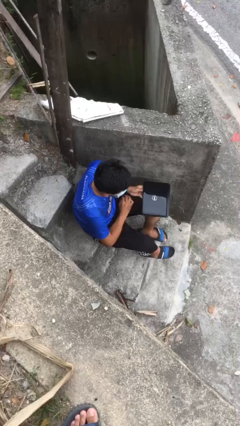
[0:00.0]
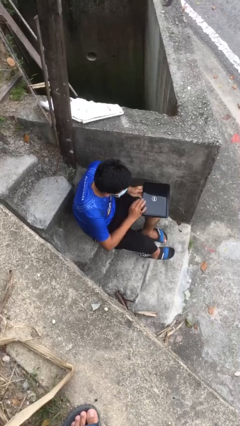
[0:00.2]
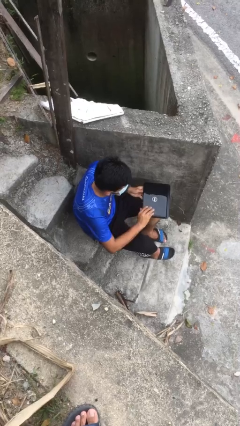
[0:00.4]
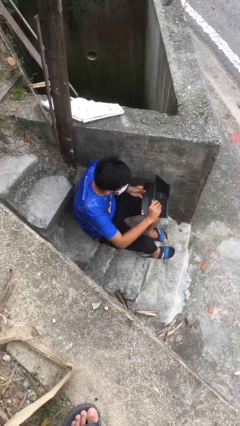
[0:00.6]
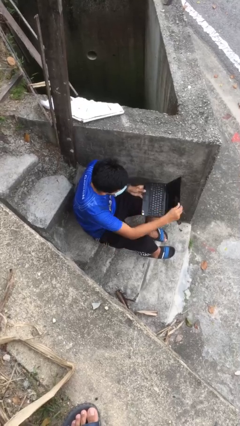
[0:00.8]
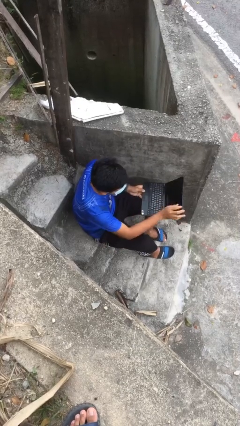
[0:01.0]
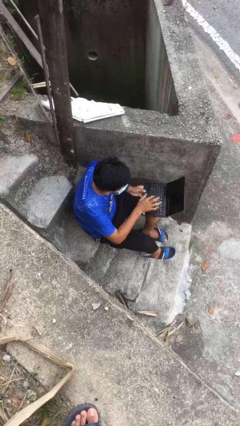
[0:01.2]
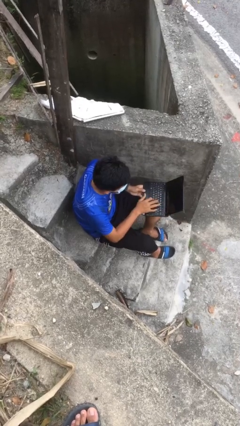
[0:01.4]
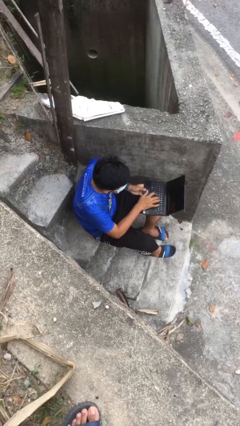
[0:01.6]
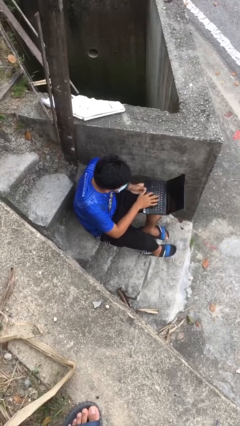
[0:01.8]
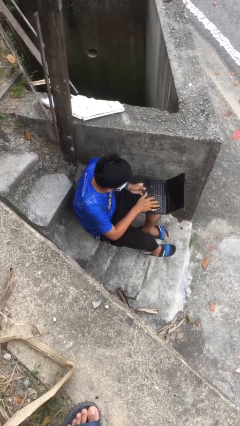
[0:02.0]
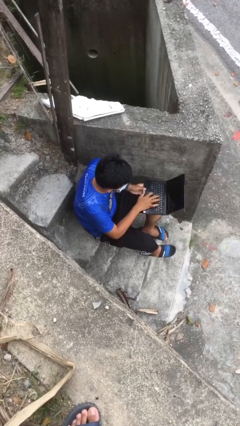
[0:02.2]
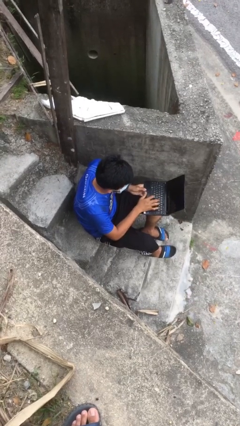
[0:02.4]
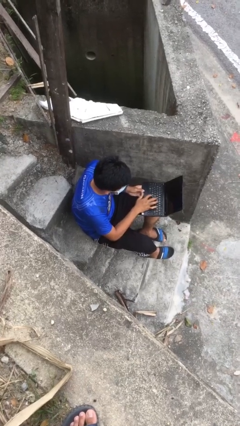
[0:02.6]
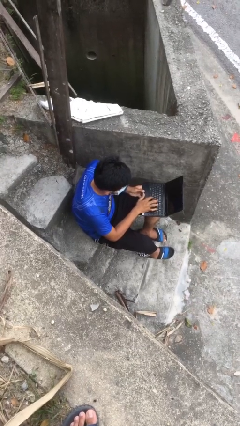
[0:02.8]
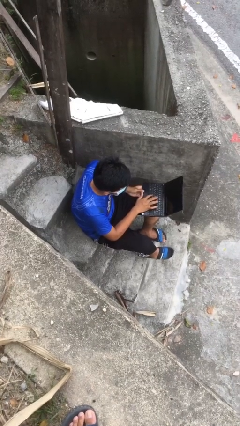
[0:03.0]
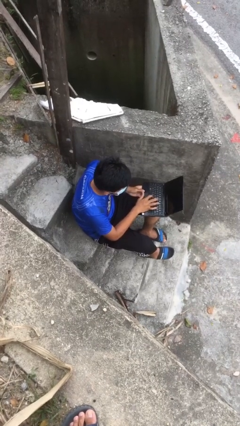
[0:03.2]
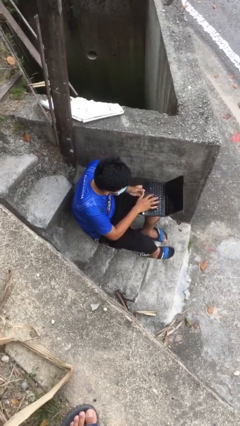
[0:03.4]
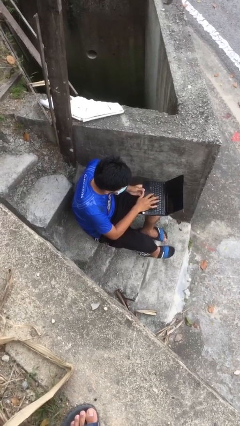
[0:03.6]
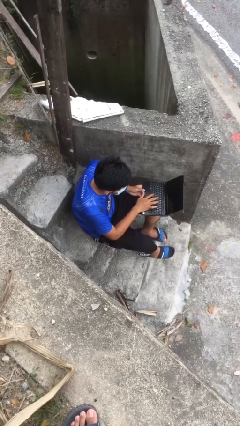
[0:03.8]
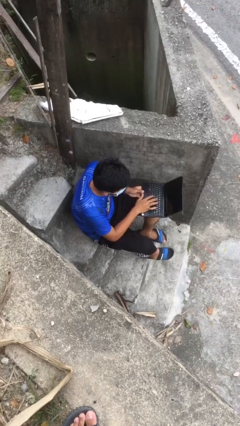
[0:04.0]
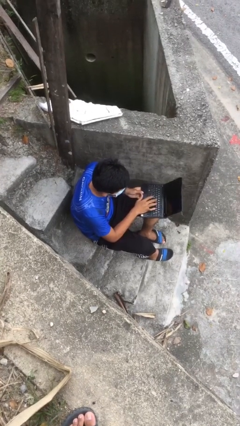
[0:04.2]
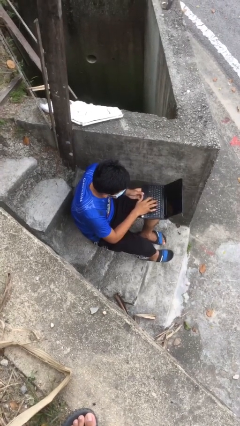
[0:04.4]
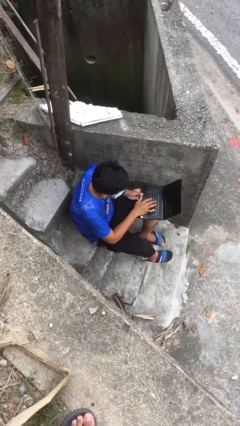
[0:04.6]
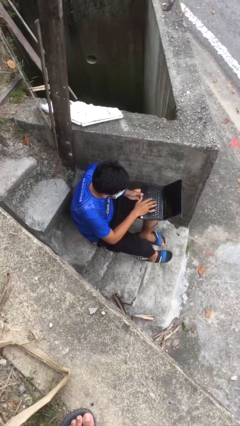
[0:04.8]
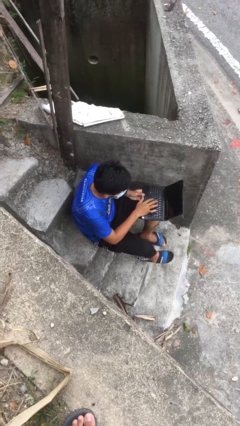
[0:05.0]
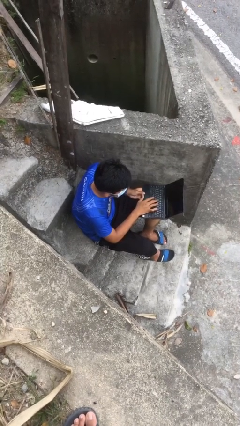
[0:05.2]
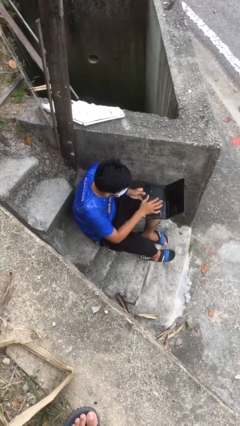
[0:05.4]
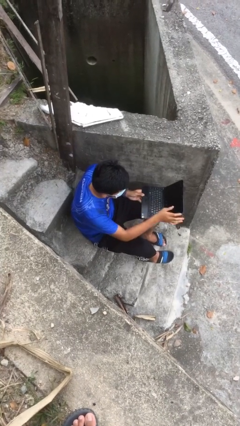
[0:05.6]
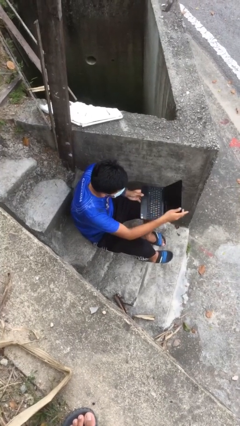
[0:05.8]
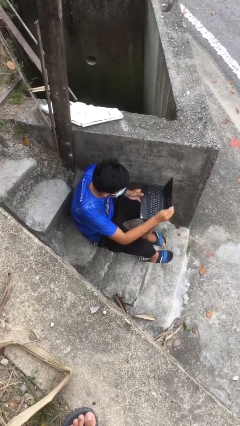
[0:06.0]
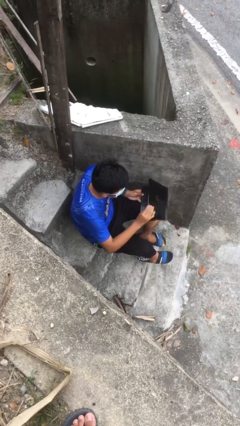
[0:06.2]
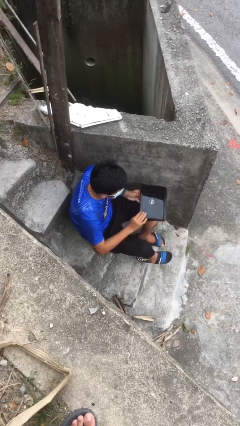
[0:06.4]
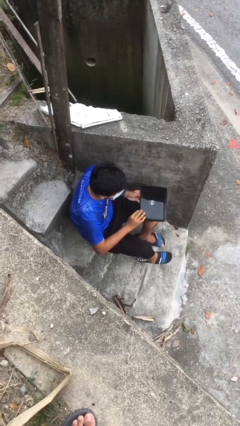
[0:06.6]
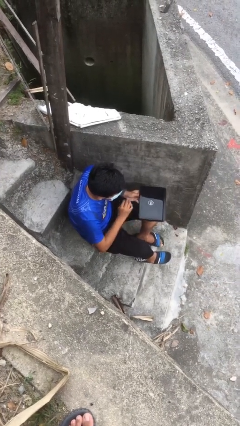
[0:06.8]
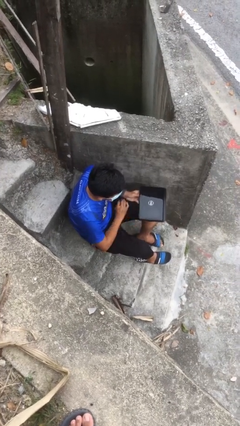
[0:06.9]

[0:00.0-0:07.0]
person interacts with laptop

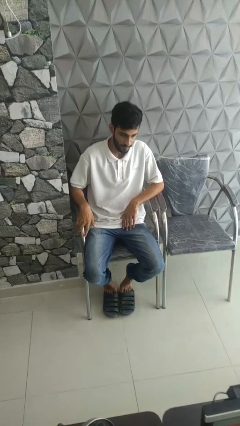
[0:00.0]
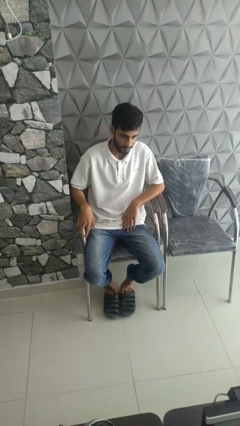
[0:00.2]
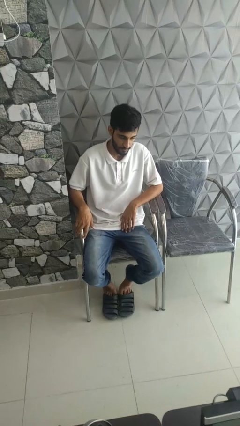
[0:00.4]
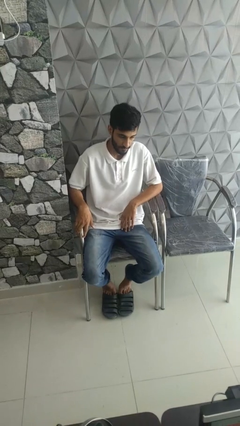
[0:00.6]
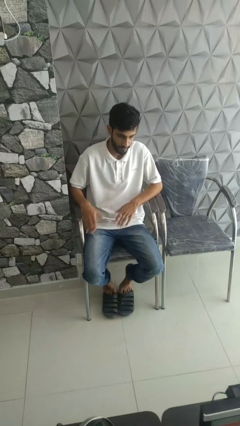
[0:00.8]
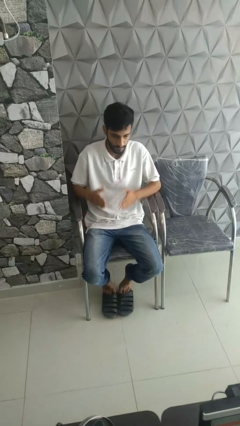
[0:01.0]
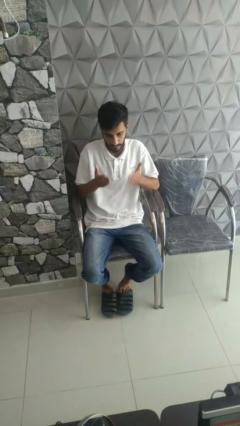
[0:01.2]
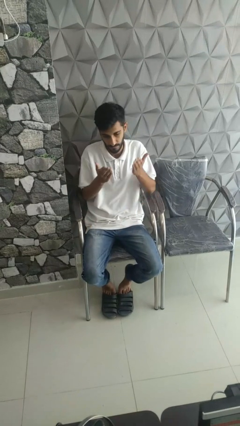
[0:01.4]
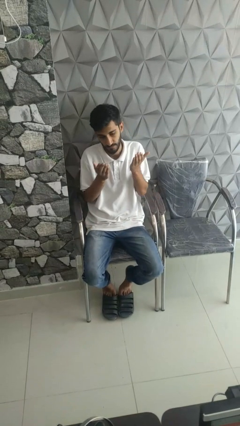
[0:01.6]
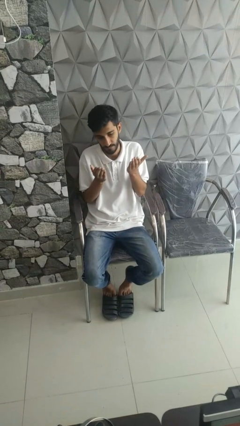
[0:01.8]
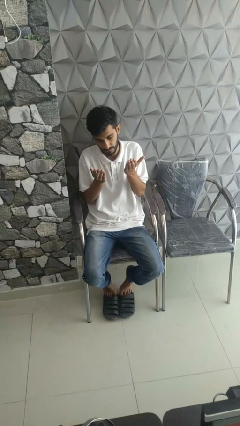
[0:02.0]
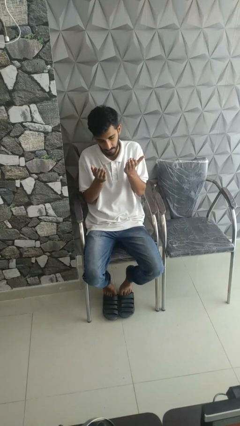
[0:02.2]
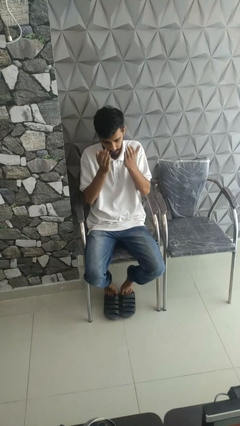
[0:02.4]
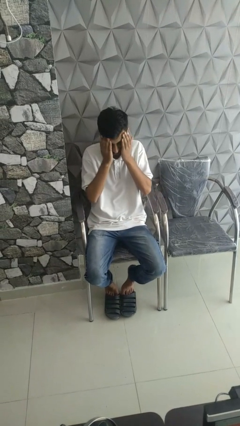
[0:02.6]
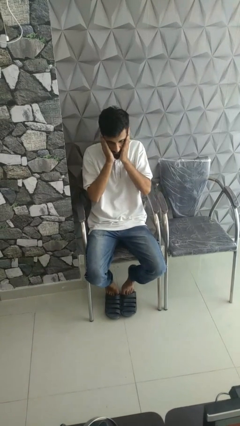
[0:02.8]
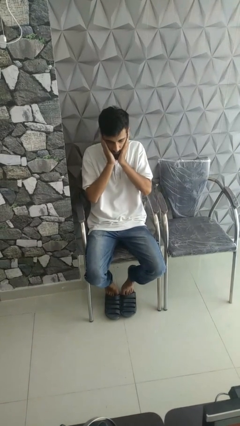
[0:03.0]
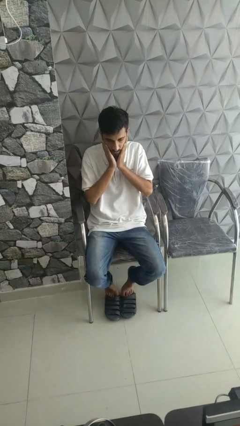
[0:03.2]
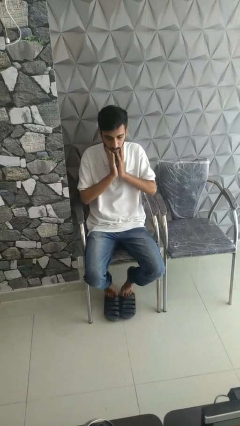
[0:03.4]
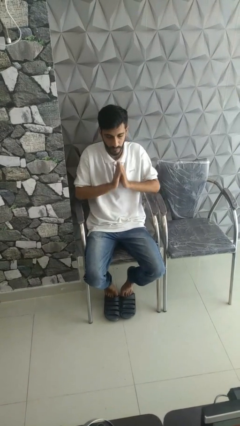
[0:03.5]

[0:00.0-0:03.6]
person prays

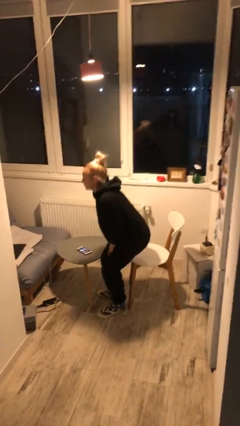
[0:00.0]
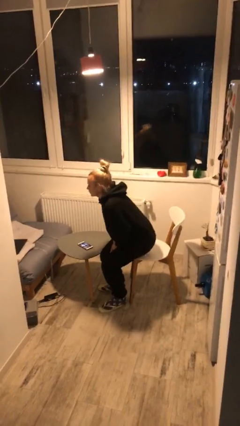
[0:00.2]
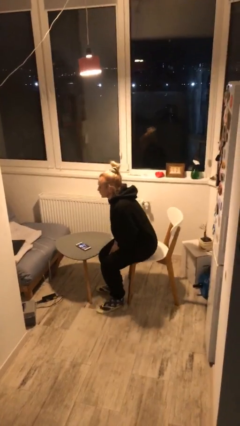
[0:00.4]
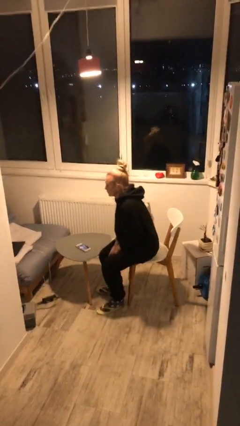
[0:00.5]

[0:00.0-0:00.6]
person sits down

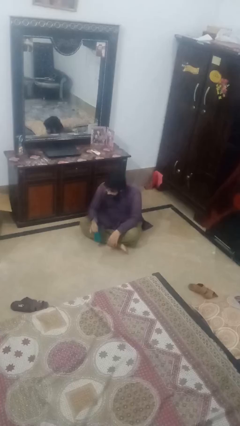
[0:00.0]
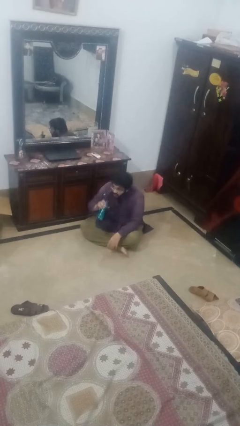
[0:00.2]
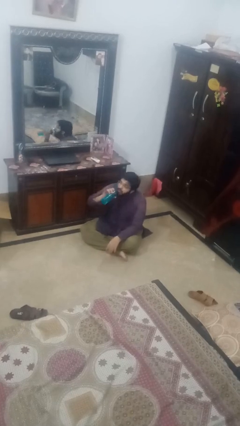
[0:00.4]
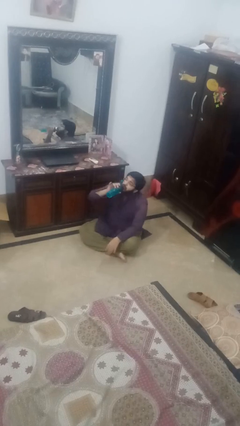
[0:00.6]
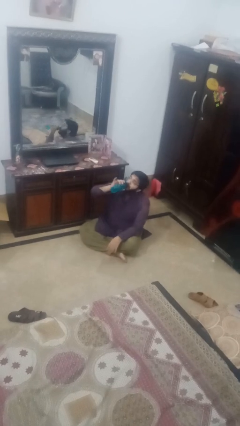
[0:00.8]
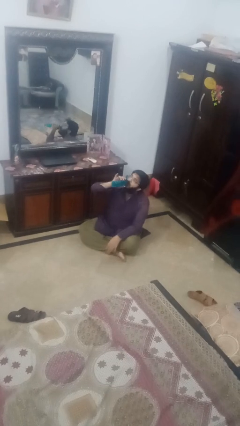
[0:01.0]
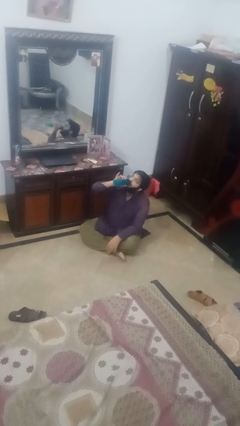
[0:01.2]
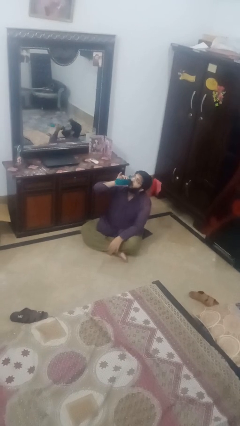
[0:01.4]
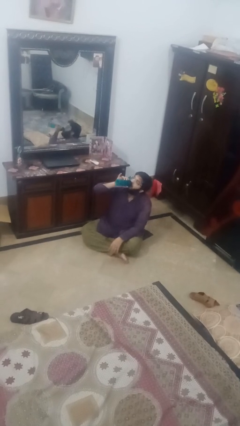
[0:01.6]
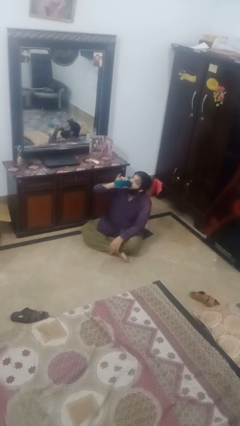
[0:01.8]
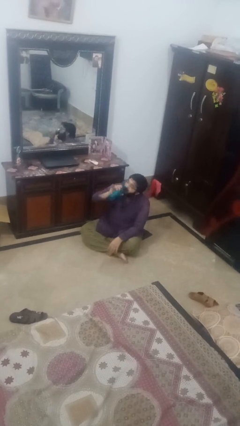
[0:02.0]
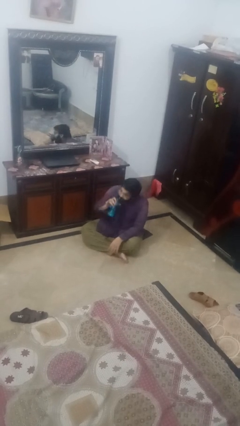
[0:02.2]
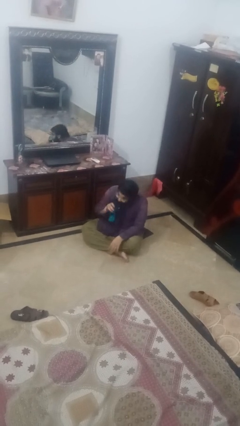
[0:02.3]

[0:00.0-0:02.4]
person drinks from bottle

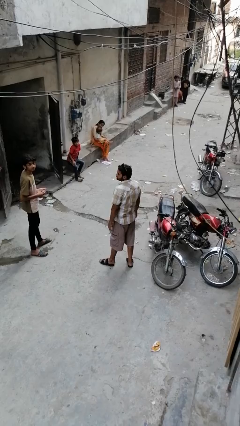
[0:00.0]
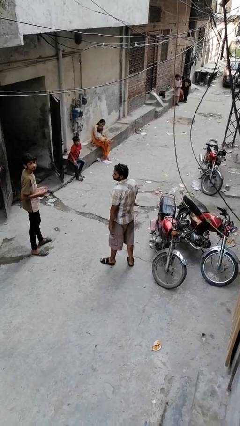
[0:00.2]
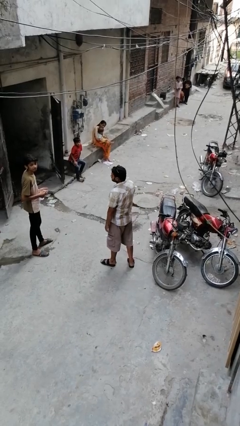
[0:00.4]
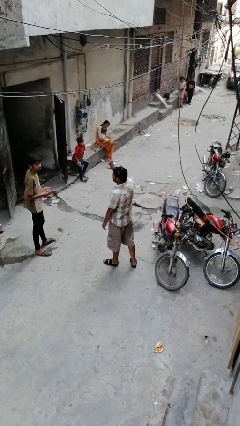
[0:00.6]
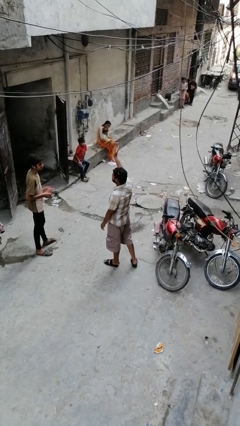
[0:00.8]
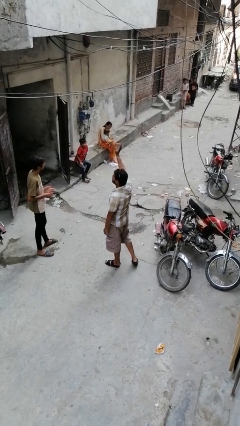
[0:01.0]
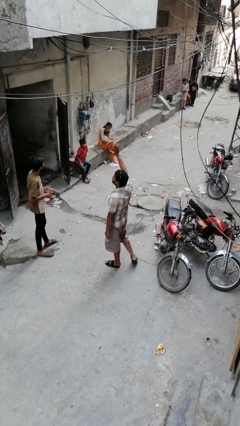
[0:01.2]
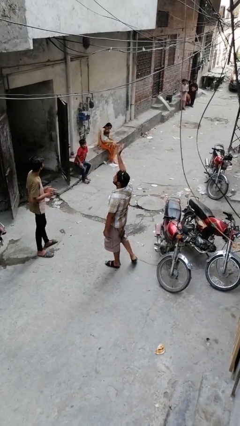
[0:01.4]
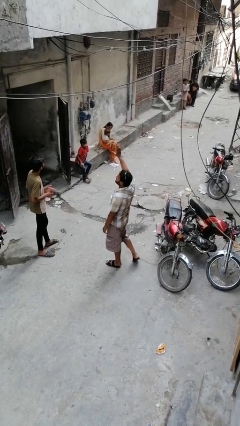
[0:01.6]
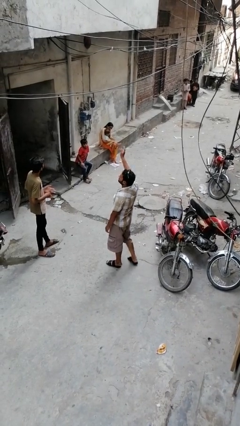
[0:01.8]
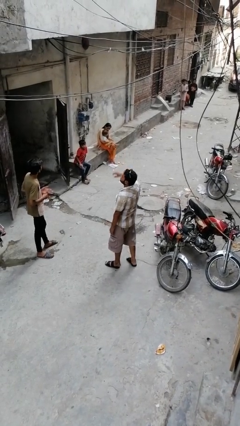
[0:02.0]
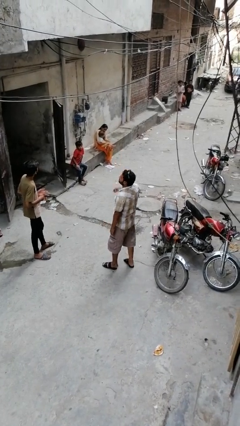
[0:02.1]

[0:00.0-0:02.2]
person waves at person

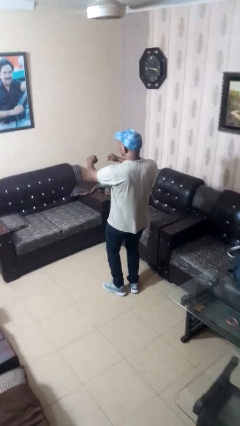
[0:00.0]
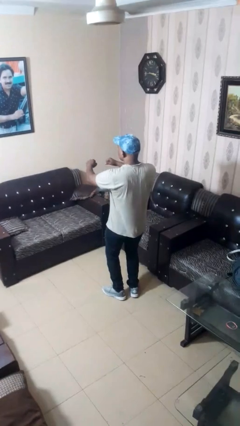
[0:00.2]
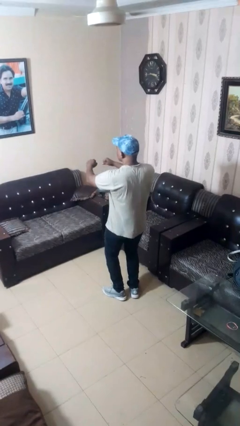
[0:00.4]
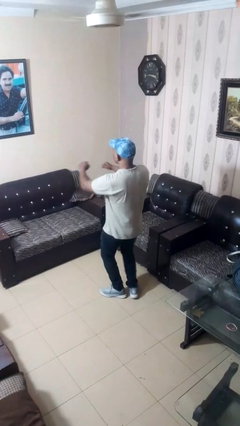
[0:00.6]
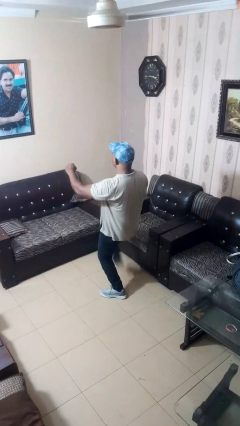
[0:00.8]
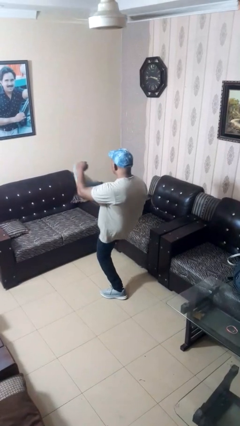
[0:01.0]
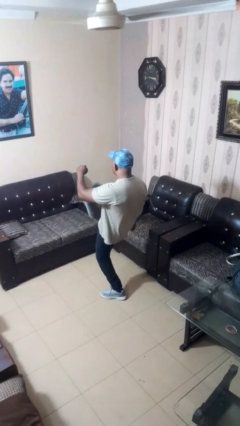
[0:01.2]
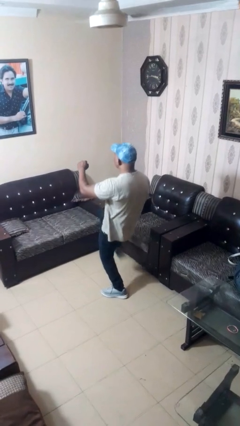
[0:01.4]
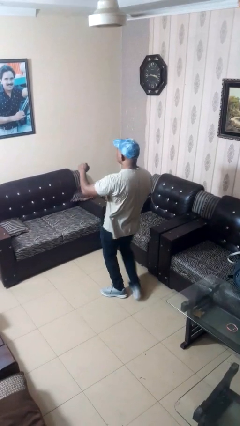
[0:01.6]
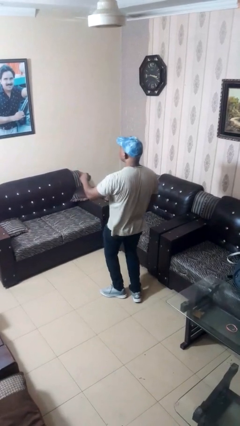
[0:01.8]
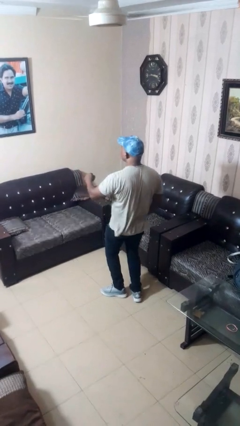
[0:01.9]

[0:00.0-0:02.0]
person karate kicks
